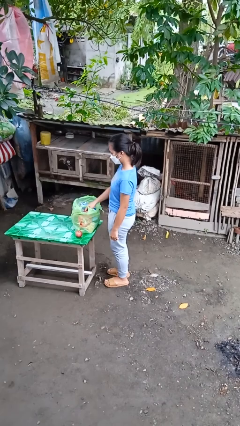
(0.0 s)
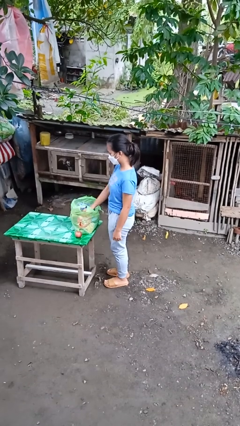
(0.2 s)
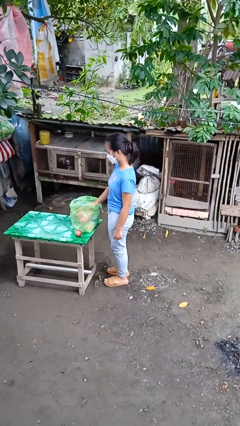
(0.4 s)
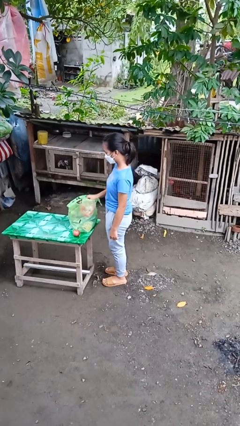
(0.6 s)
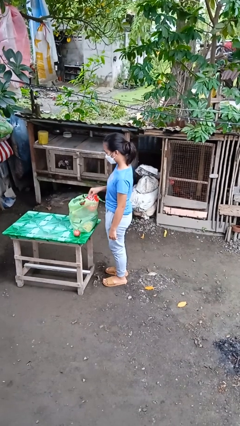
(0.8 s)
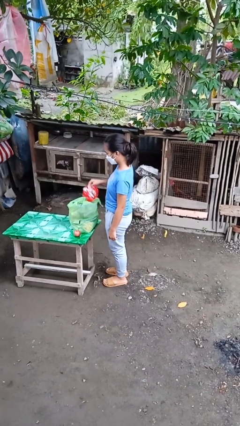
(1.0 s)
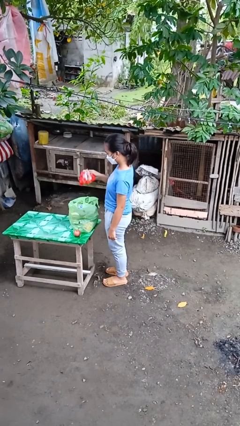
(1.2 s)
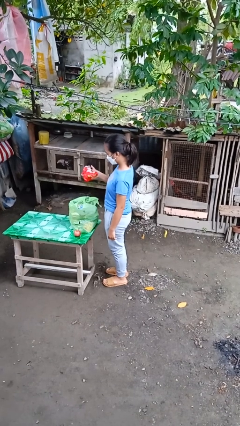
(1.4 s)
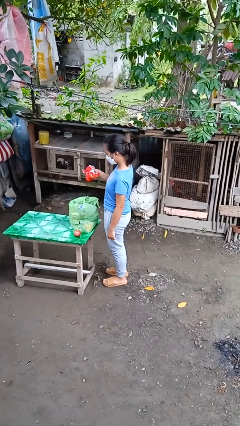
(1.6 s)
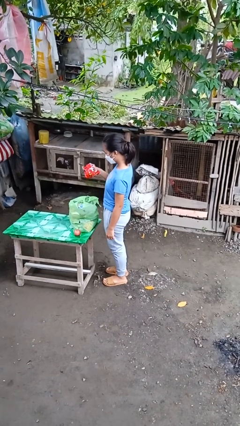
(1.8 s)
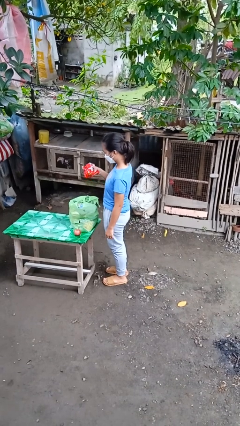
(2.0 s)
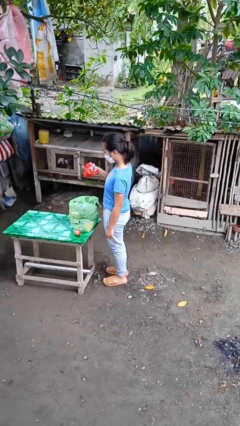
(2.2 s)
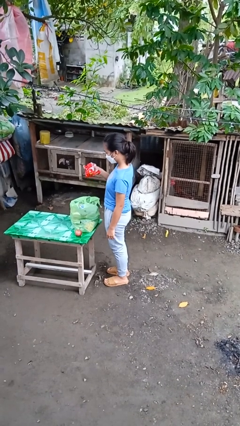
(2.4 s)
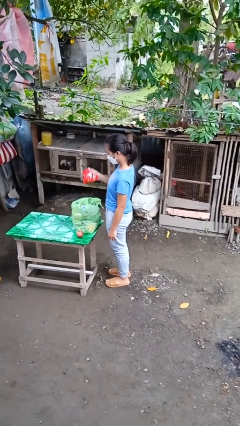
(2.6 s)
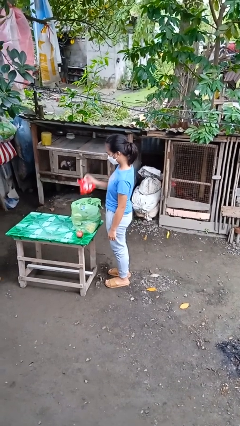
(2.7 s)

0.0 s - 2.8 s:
person takes object from bag

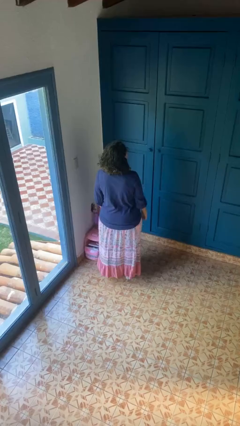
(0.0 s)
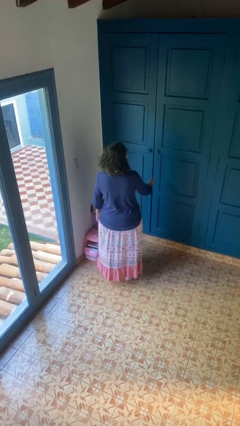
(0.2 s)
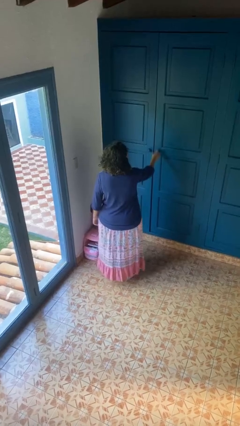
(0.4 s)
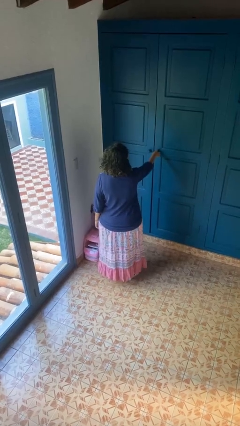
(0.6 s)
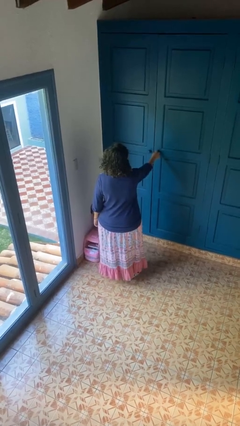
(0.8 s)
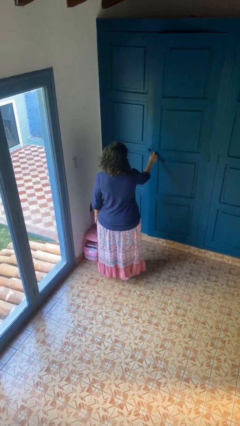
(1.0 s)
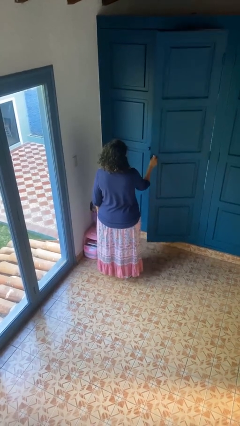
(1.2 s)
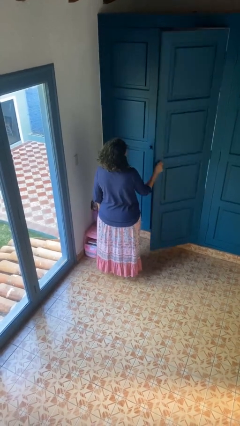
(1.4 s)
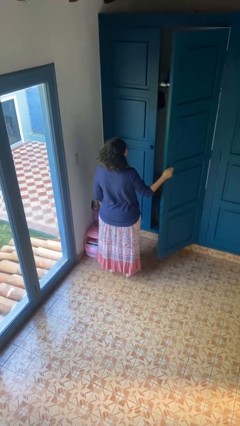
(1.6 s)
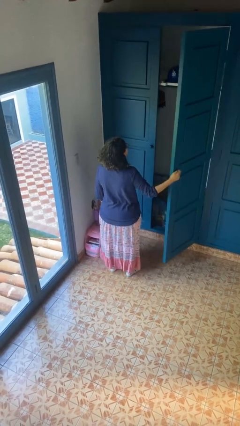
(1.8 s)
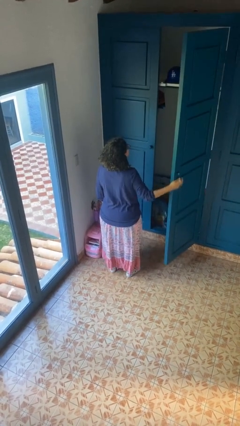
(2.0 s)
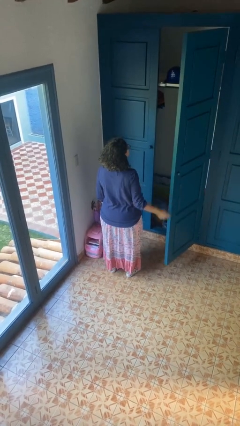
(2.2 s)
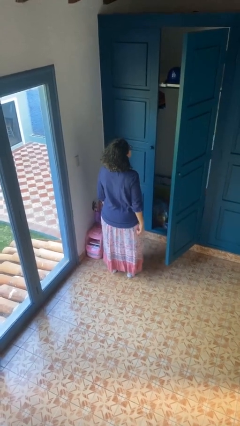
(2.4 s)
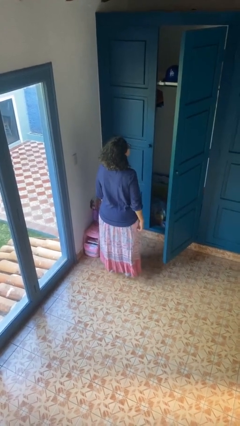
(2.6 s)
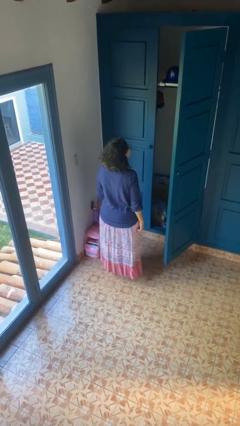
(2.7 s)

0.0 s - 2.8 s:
person opens closet door

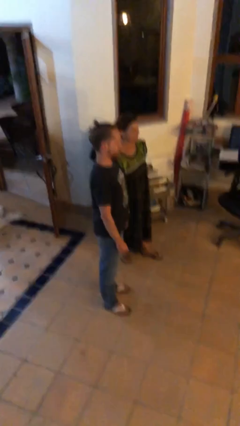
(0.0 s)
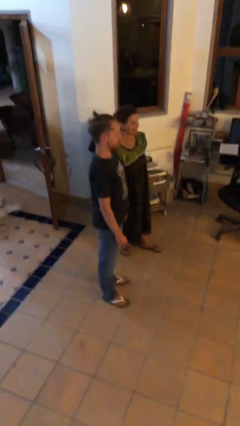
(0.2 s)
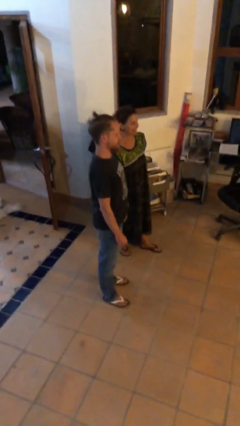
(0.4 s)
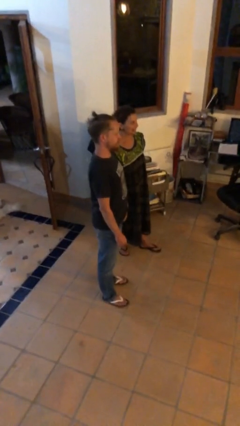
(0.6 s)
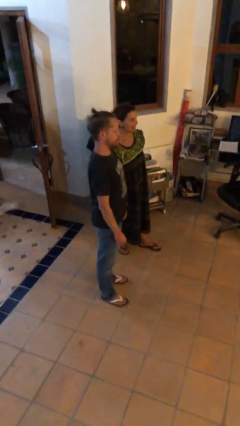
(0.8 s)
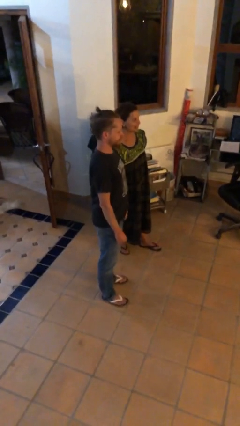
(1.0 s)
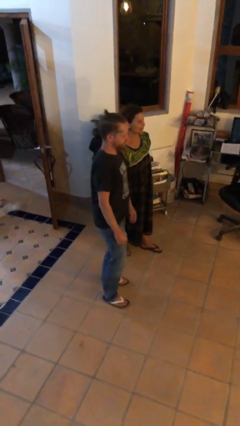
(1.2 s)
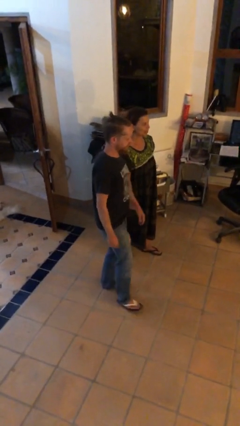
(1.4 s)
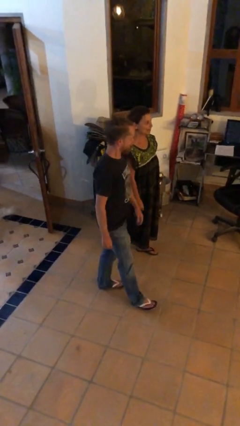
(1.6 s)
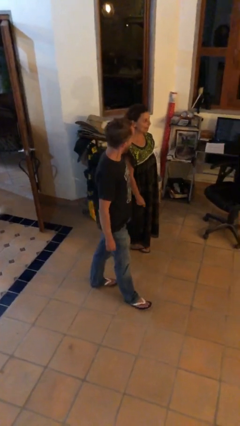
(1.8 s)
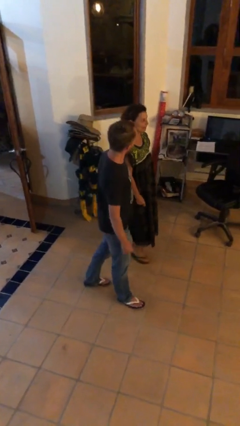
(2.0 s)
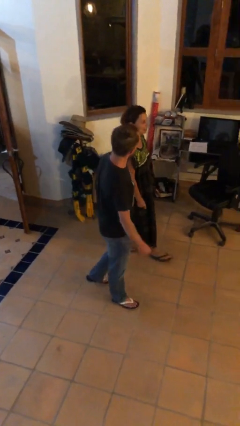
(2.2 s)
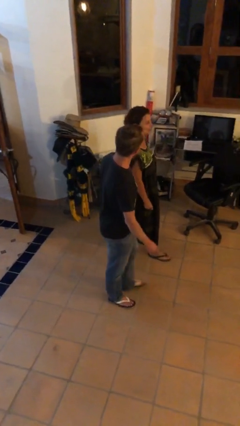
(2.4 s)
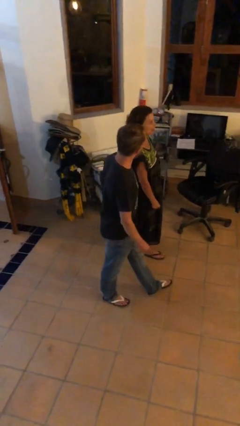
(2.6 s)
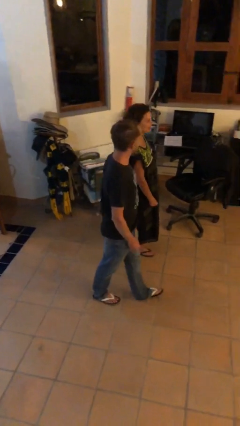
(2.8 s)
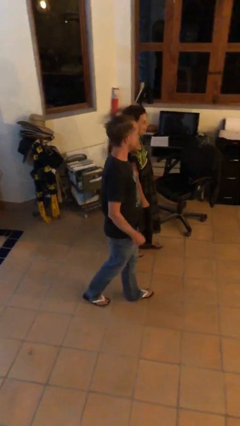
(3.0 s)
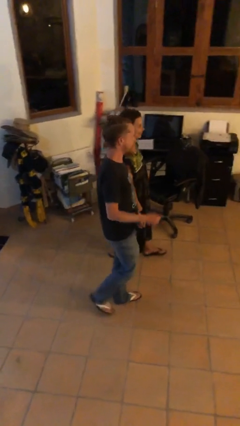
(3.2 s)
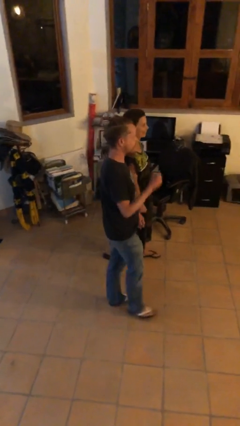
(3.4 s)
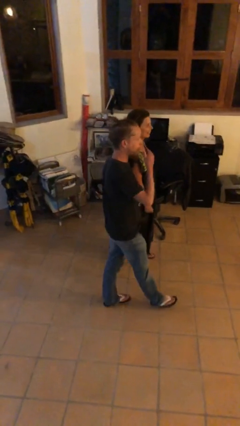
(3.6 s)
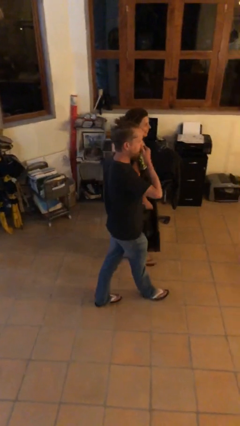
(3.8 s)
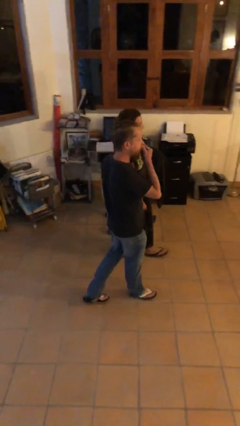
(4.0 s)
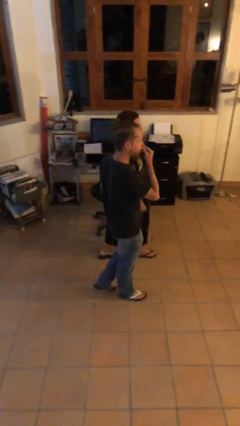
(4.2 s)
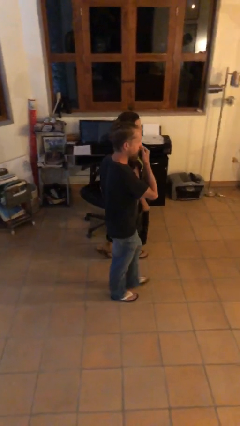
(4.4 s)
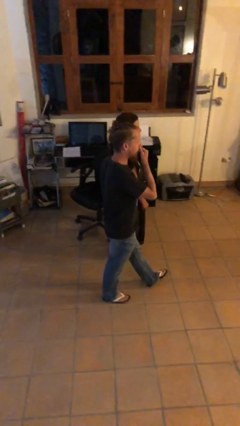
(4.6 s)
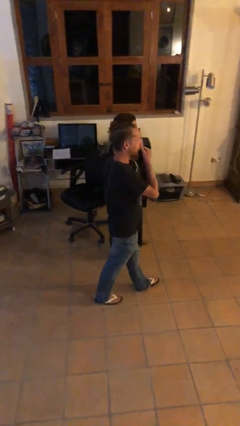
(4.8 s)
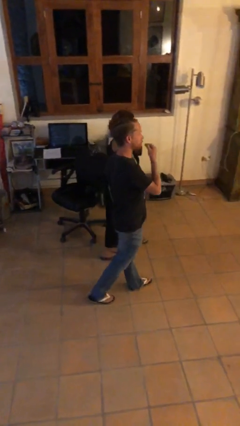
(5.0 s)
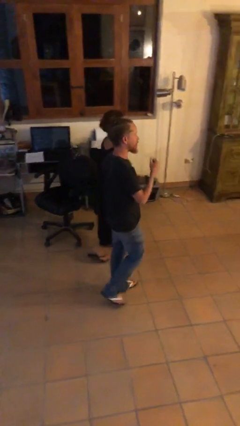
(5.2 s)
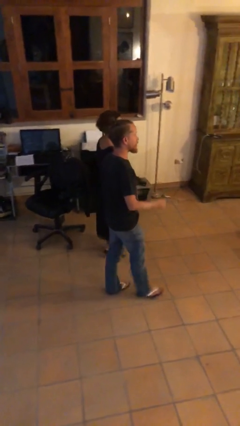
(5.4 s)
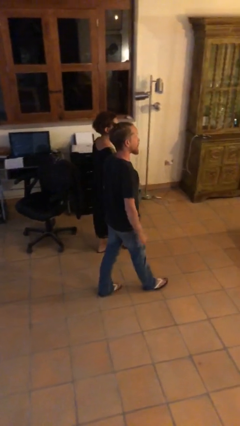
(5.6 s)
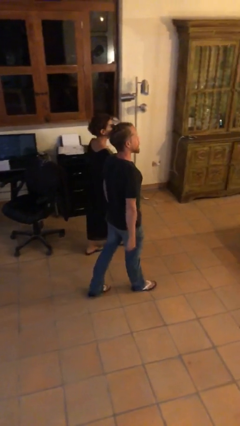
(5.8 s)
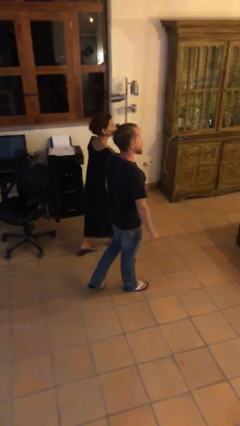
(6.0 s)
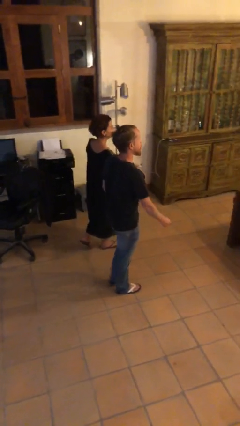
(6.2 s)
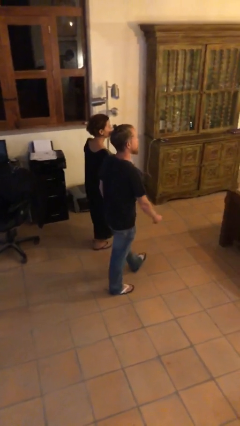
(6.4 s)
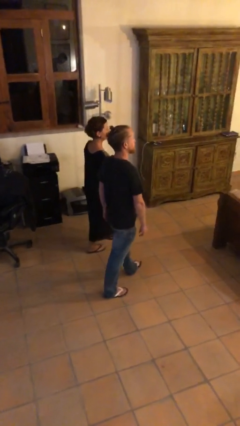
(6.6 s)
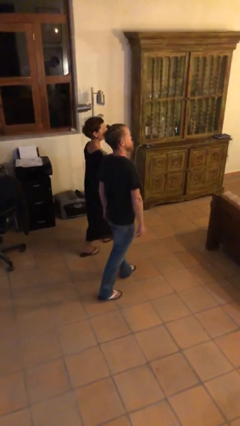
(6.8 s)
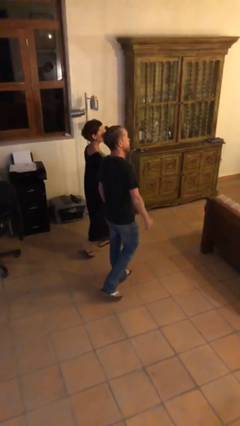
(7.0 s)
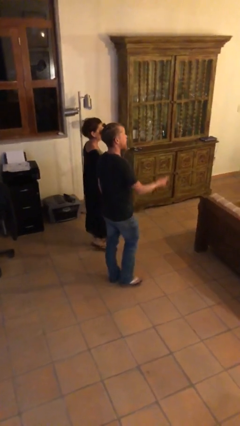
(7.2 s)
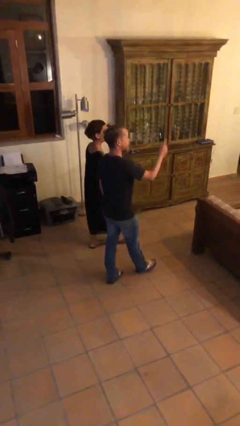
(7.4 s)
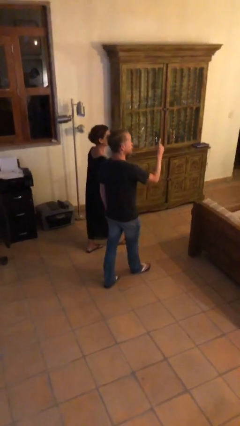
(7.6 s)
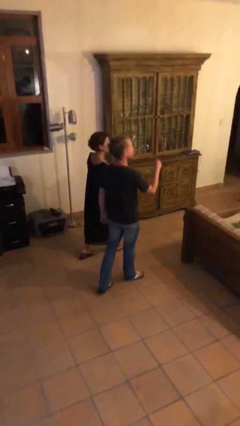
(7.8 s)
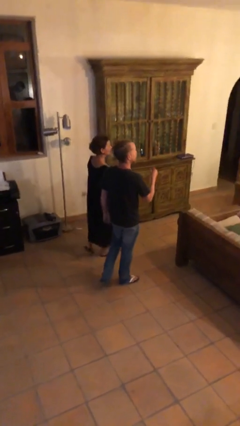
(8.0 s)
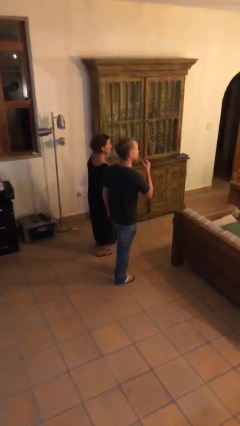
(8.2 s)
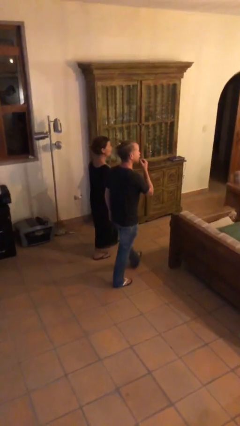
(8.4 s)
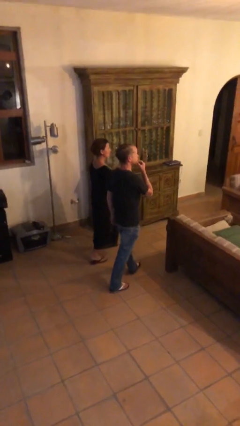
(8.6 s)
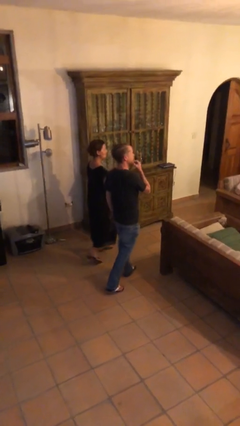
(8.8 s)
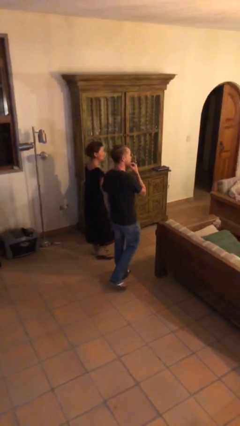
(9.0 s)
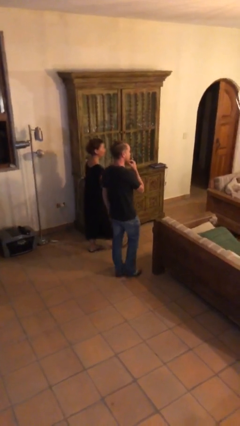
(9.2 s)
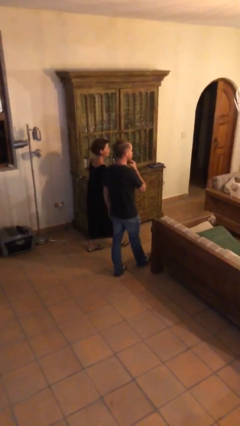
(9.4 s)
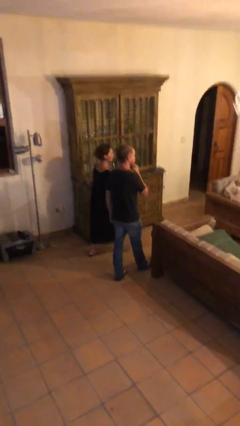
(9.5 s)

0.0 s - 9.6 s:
person talks to person

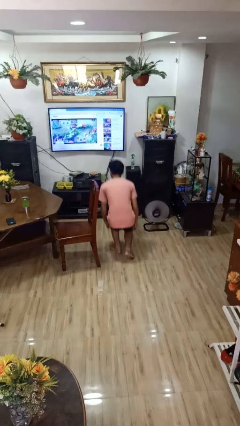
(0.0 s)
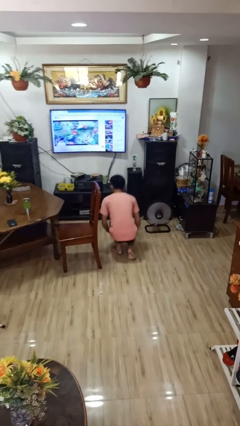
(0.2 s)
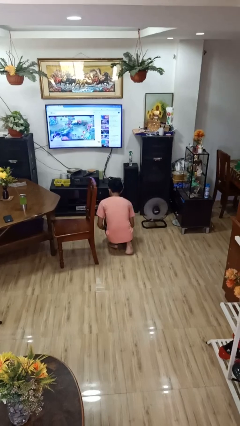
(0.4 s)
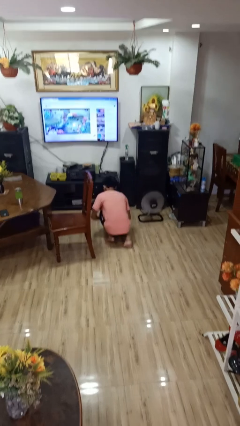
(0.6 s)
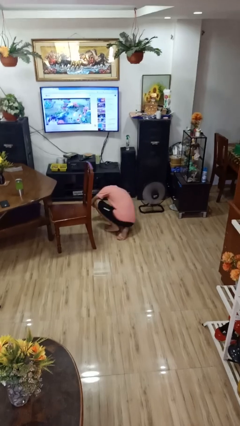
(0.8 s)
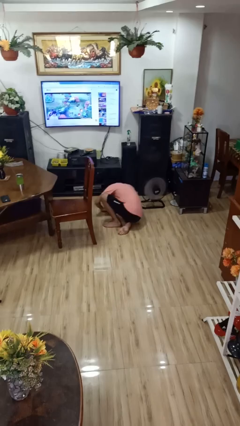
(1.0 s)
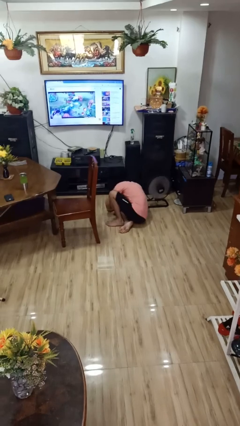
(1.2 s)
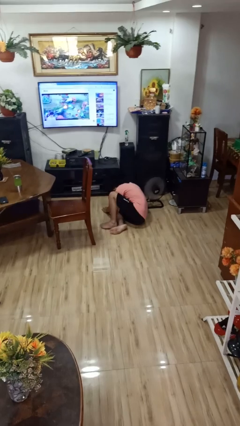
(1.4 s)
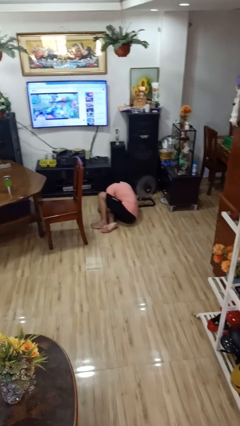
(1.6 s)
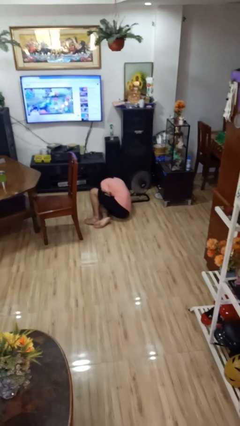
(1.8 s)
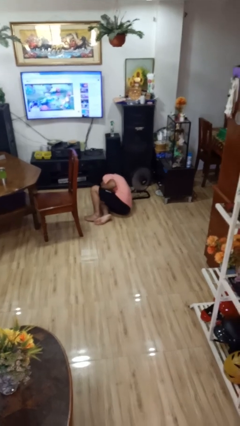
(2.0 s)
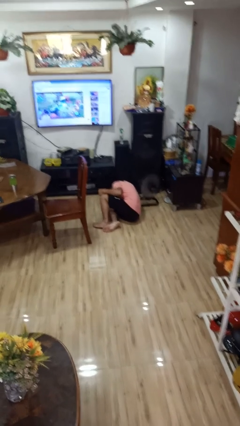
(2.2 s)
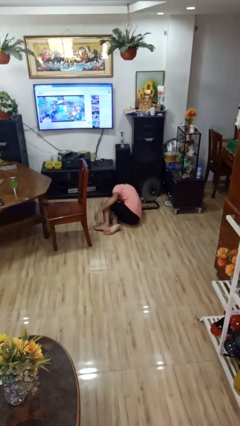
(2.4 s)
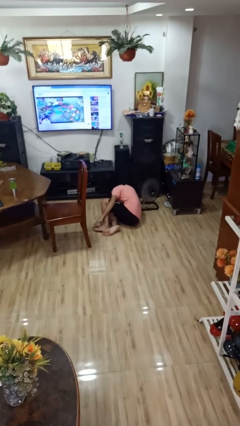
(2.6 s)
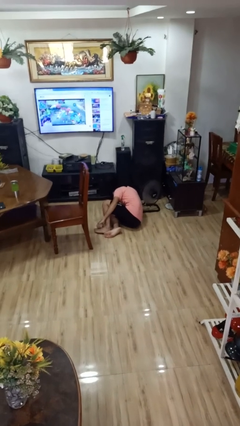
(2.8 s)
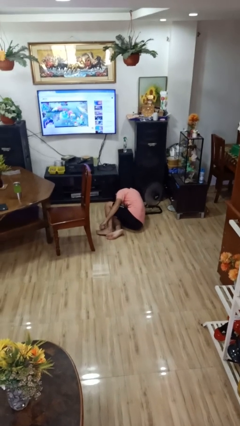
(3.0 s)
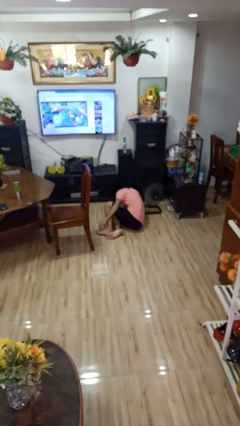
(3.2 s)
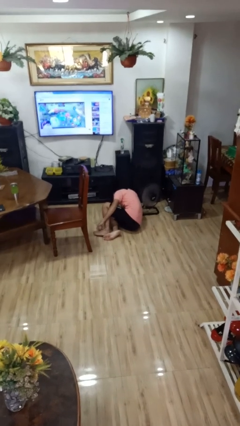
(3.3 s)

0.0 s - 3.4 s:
person lies down on floor
